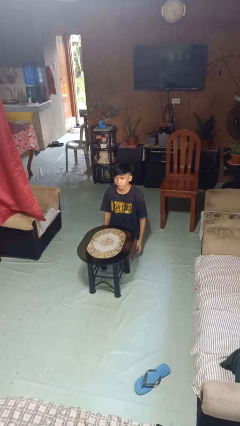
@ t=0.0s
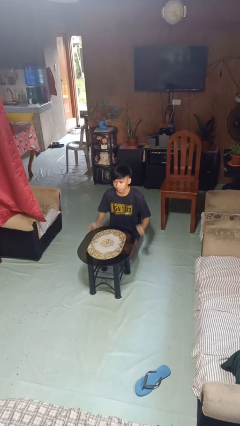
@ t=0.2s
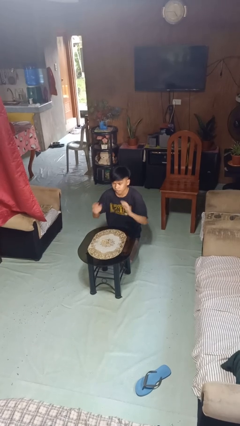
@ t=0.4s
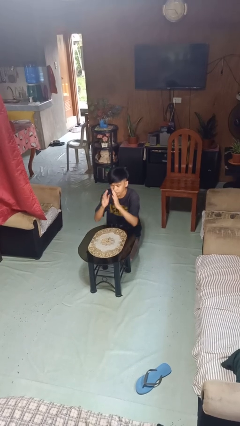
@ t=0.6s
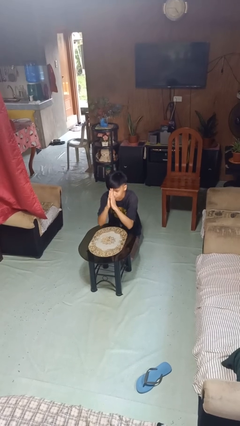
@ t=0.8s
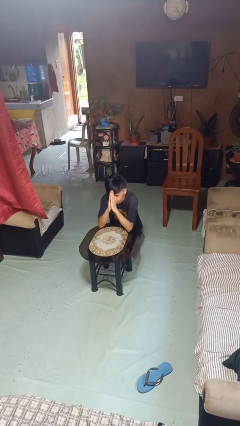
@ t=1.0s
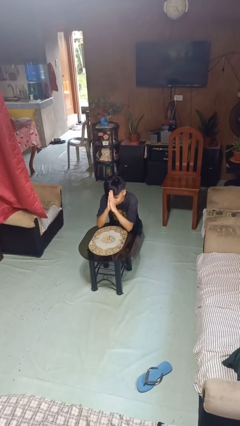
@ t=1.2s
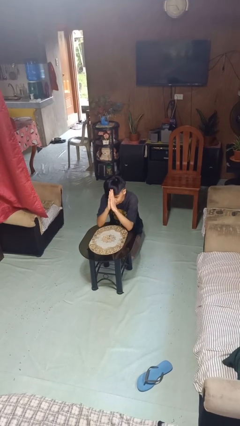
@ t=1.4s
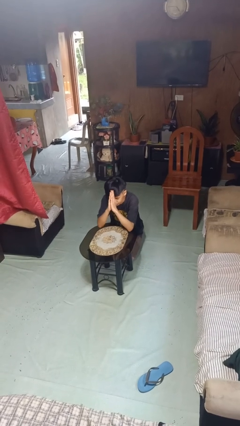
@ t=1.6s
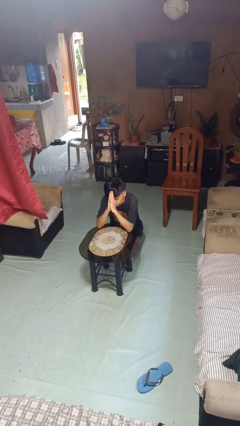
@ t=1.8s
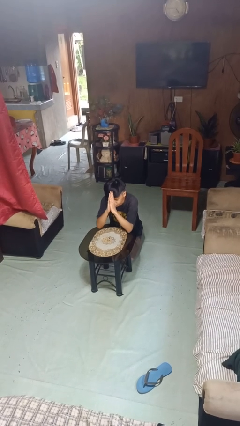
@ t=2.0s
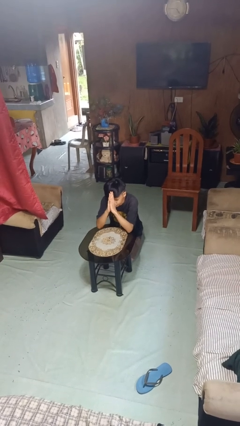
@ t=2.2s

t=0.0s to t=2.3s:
person prays

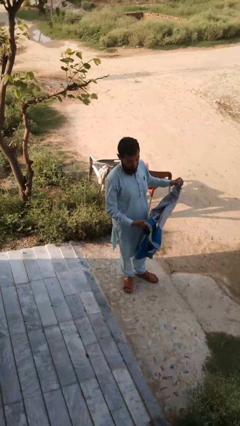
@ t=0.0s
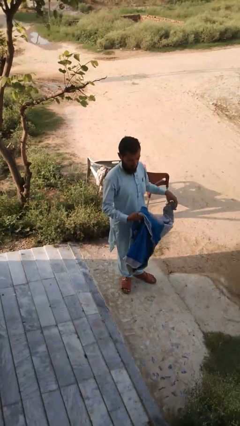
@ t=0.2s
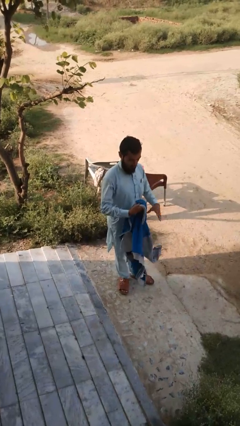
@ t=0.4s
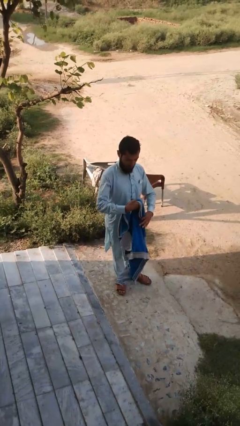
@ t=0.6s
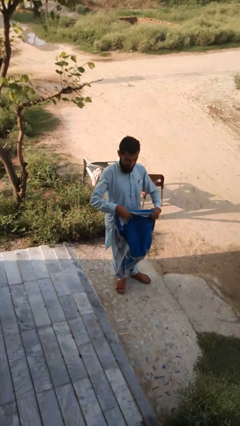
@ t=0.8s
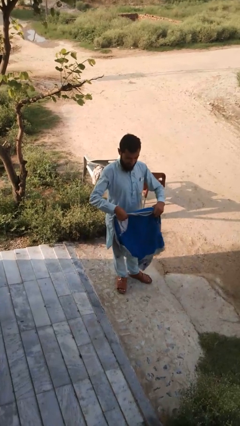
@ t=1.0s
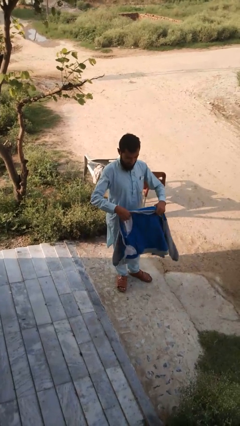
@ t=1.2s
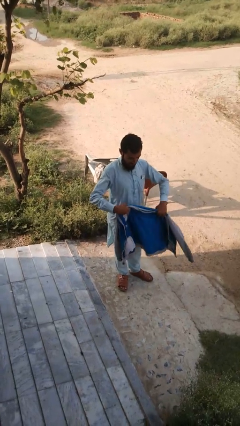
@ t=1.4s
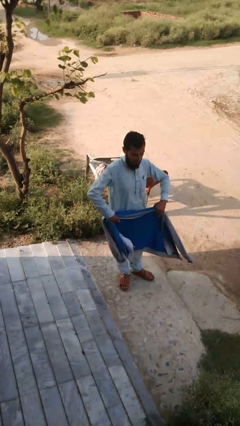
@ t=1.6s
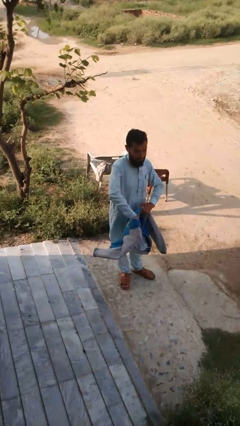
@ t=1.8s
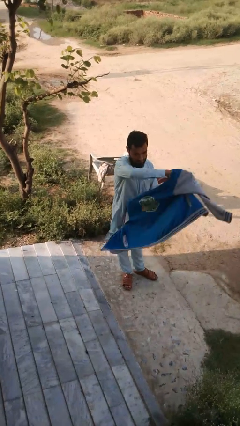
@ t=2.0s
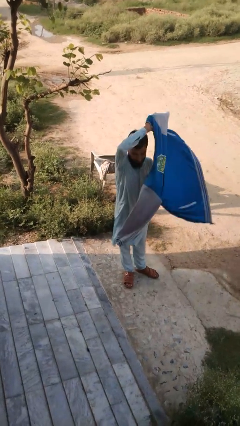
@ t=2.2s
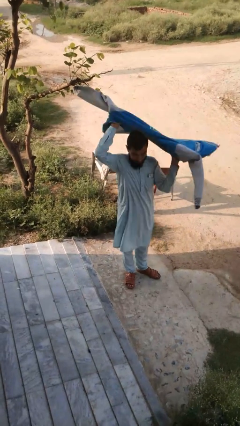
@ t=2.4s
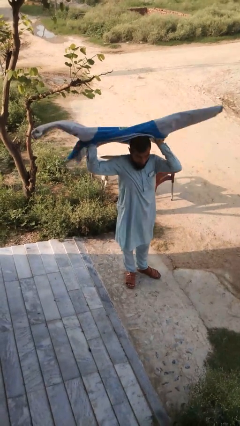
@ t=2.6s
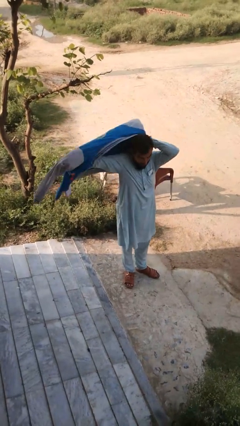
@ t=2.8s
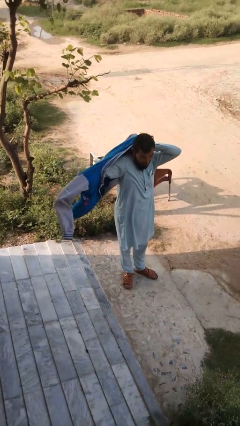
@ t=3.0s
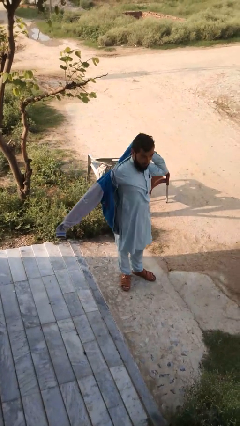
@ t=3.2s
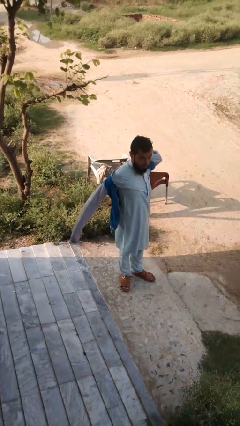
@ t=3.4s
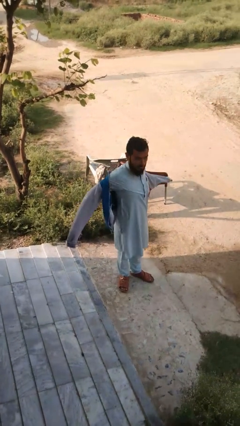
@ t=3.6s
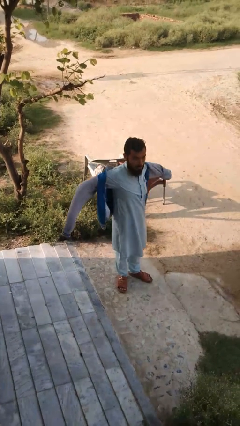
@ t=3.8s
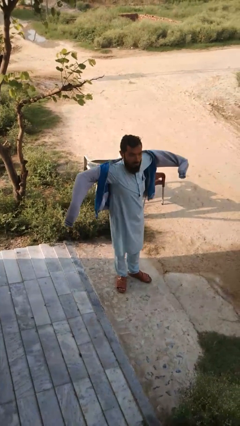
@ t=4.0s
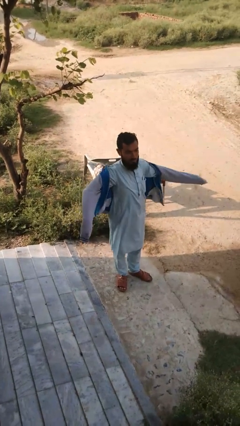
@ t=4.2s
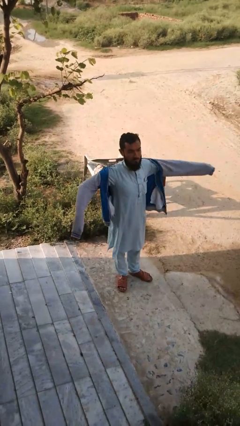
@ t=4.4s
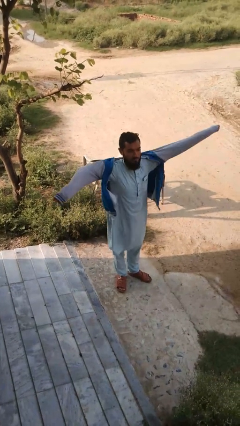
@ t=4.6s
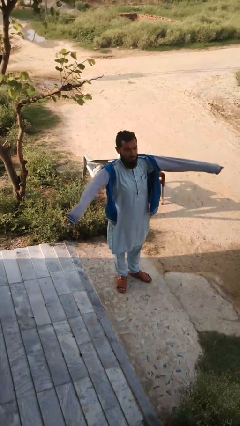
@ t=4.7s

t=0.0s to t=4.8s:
person puts on jacket

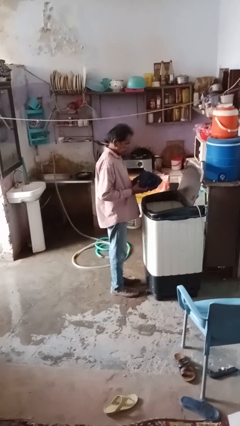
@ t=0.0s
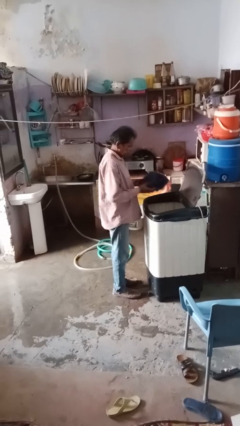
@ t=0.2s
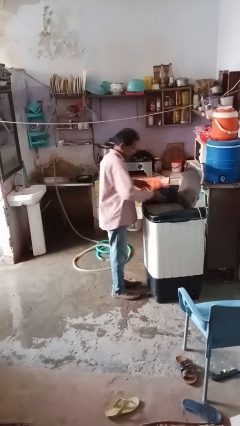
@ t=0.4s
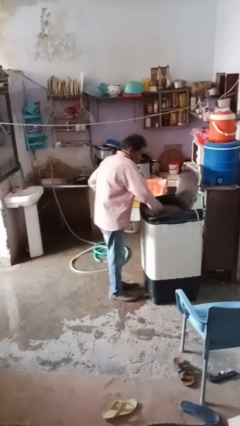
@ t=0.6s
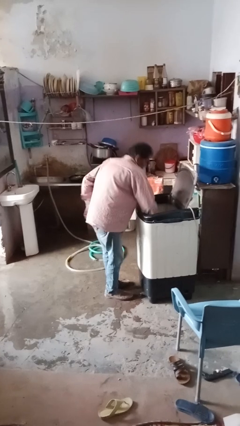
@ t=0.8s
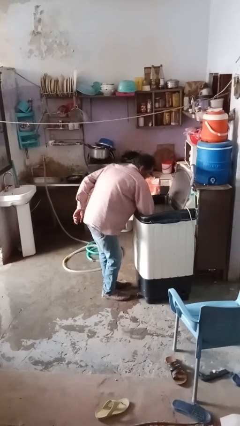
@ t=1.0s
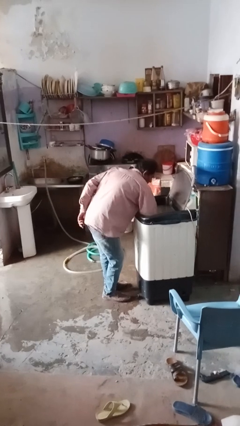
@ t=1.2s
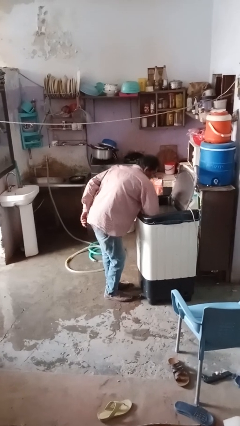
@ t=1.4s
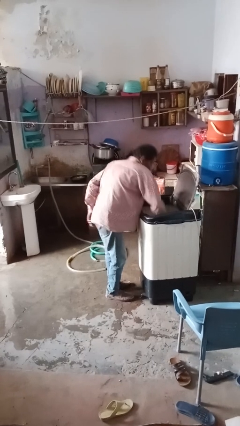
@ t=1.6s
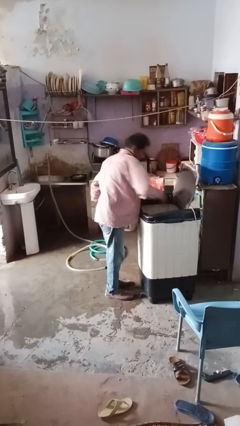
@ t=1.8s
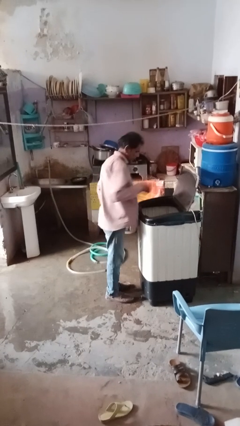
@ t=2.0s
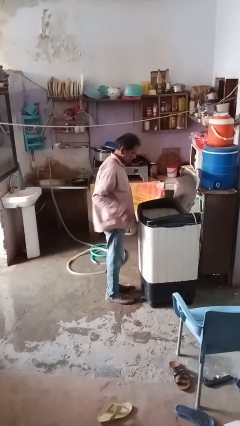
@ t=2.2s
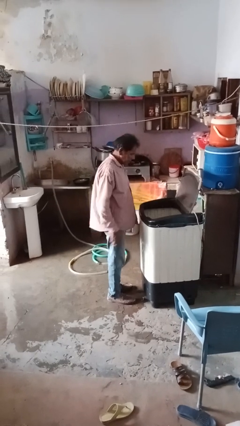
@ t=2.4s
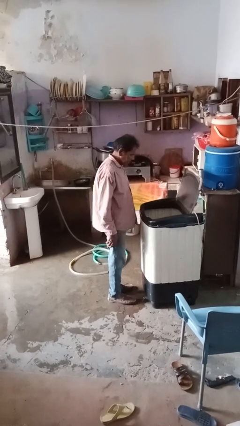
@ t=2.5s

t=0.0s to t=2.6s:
person loads clotheswasher

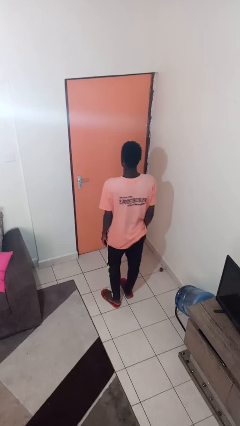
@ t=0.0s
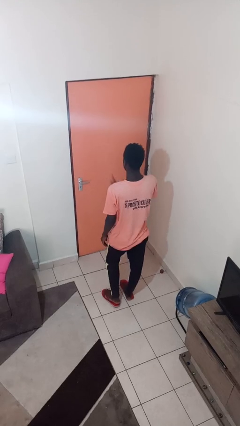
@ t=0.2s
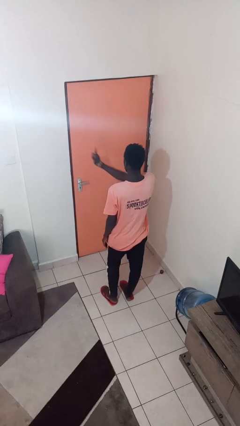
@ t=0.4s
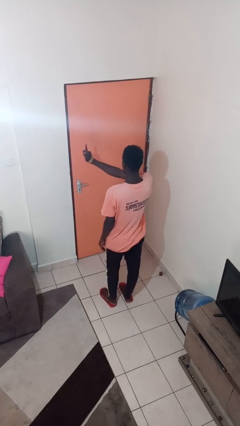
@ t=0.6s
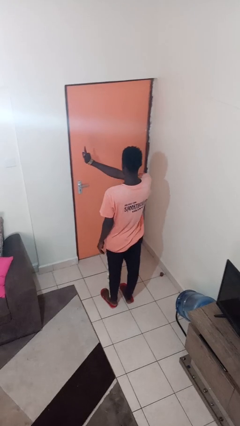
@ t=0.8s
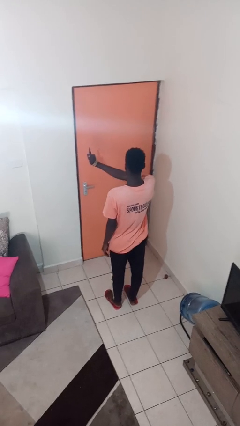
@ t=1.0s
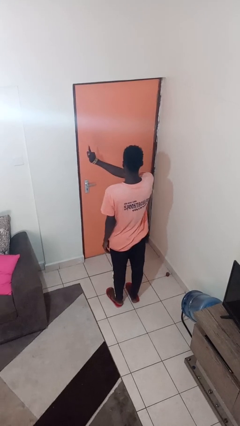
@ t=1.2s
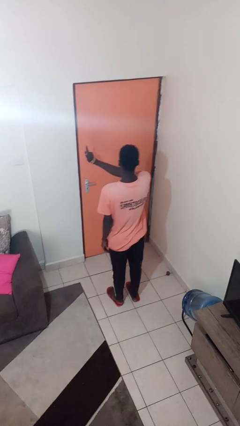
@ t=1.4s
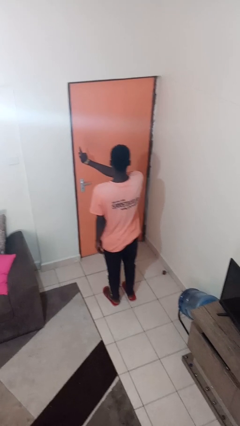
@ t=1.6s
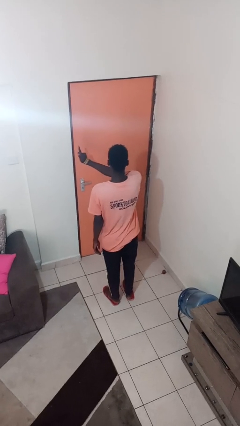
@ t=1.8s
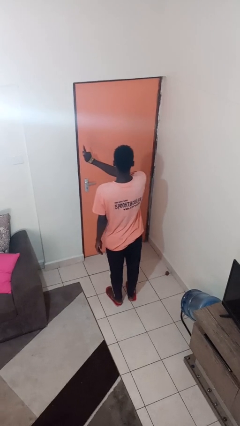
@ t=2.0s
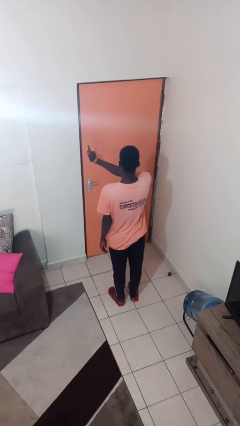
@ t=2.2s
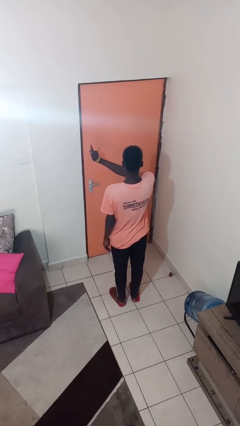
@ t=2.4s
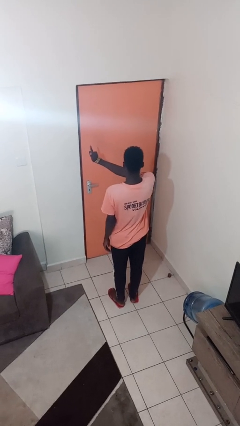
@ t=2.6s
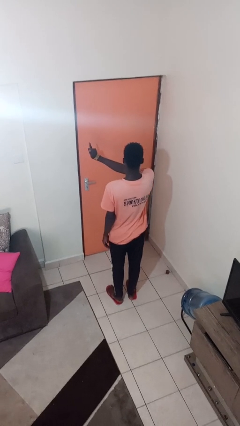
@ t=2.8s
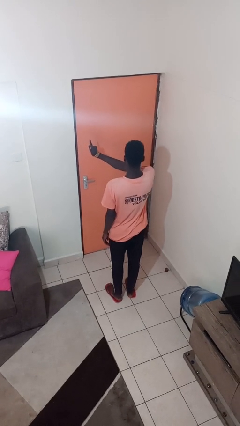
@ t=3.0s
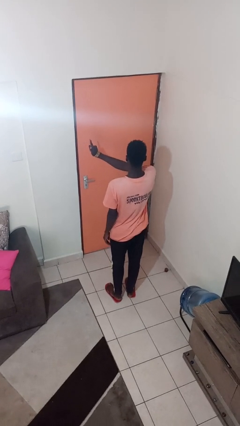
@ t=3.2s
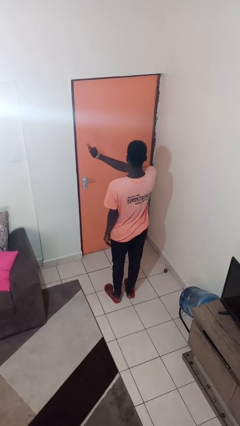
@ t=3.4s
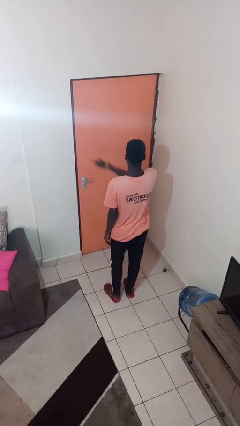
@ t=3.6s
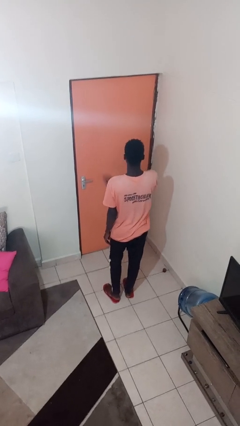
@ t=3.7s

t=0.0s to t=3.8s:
person gestures number one

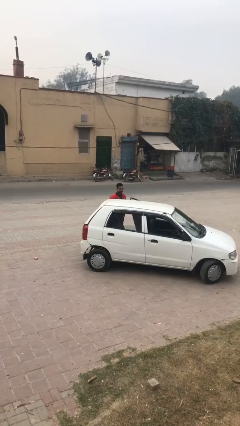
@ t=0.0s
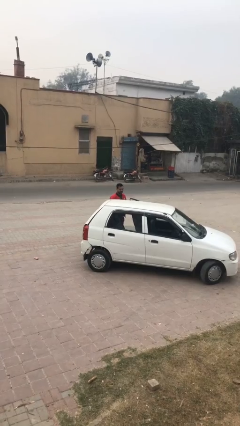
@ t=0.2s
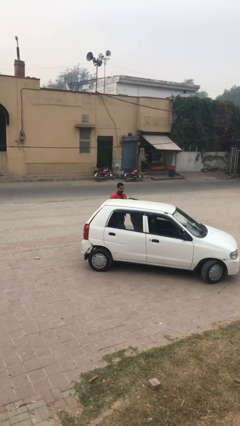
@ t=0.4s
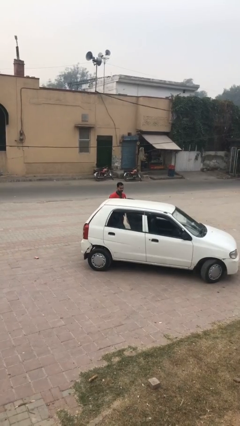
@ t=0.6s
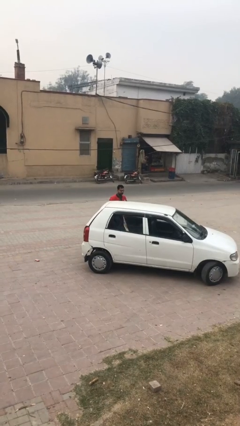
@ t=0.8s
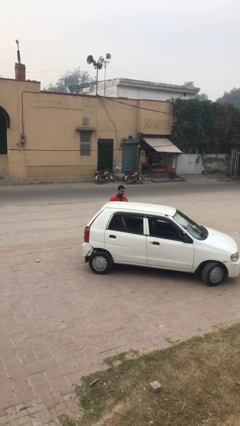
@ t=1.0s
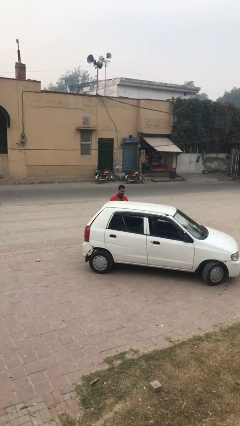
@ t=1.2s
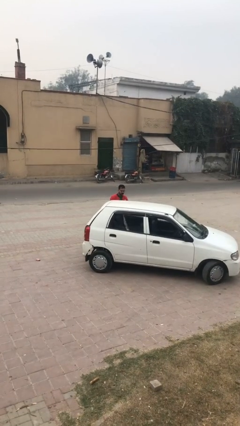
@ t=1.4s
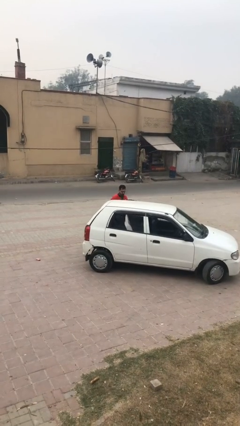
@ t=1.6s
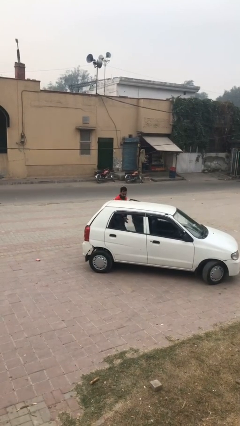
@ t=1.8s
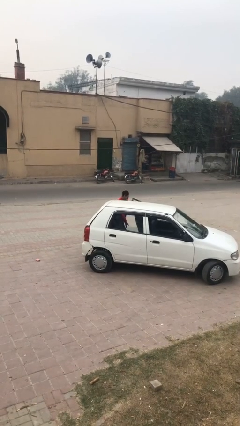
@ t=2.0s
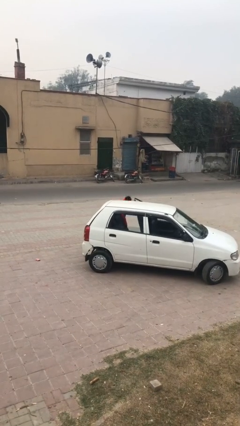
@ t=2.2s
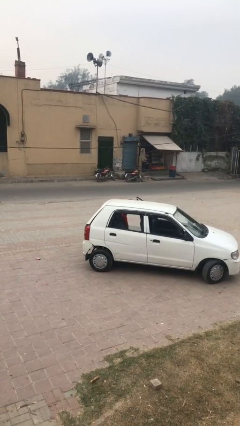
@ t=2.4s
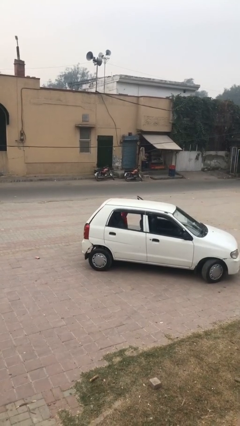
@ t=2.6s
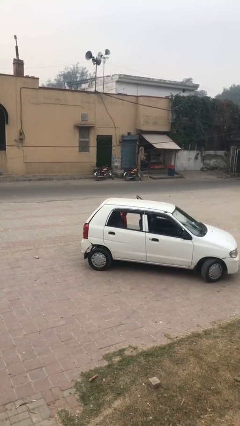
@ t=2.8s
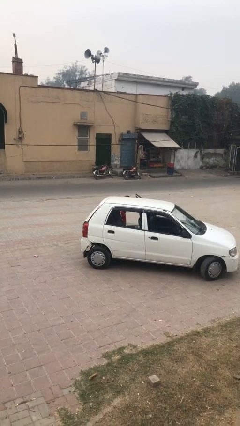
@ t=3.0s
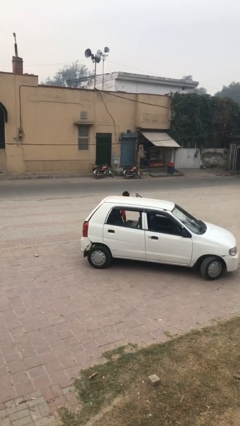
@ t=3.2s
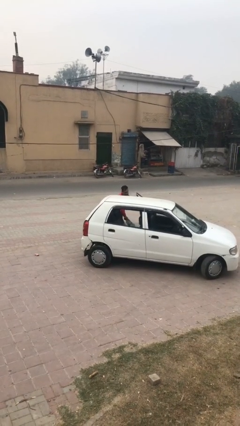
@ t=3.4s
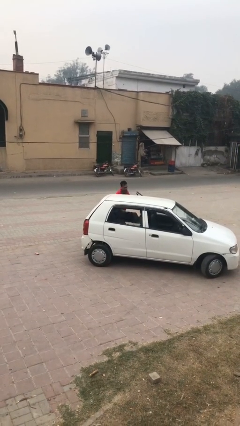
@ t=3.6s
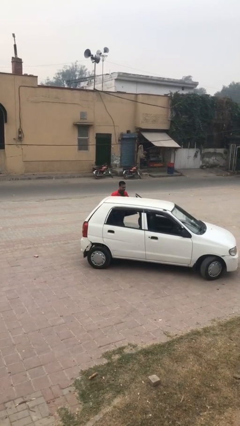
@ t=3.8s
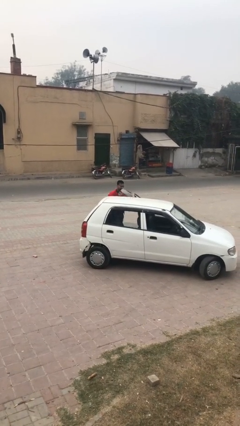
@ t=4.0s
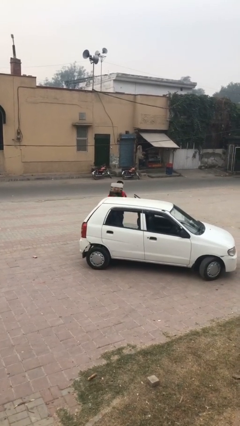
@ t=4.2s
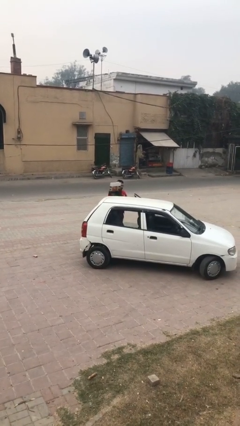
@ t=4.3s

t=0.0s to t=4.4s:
person unloads car
